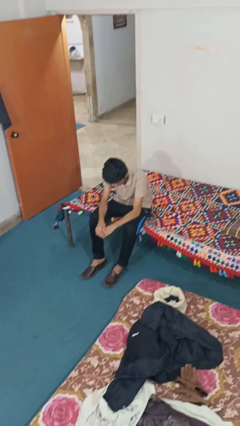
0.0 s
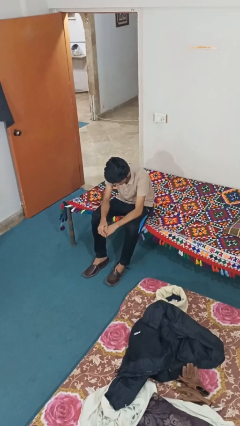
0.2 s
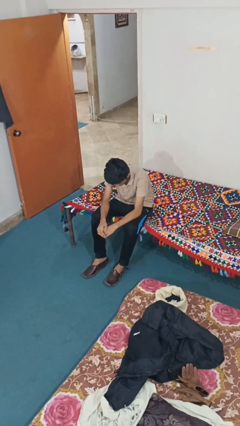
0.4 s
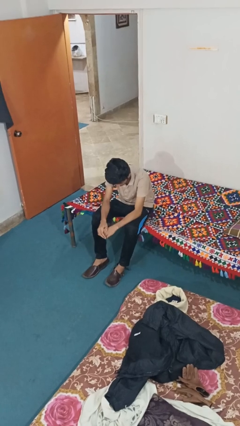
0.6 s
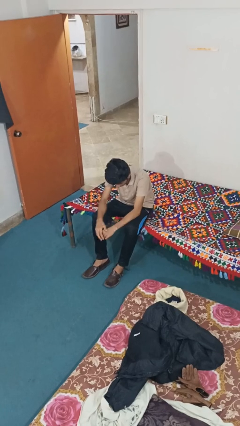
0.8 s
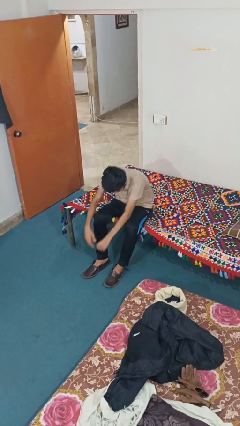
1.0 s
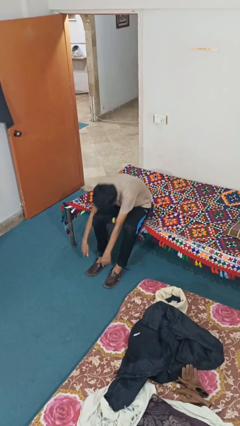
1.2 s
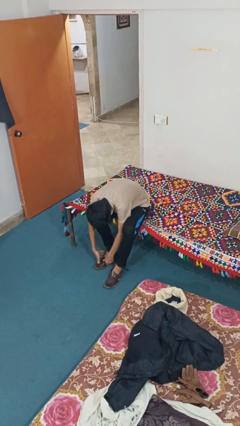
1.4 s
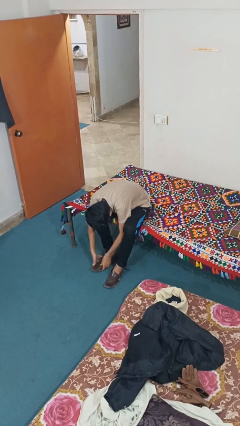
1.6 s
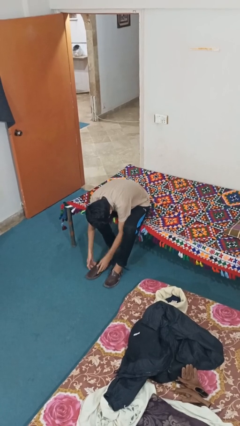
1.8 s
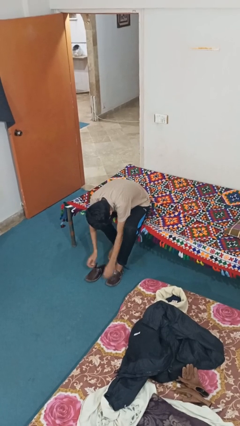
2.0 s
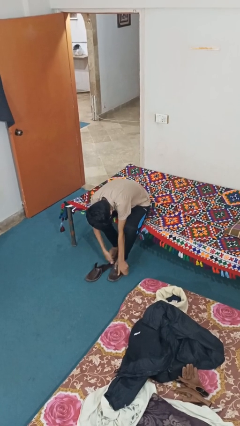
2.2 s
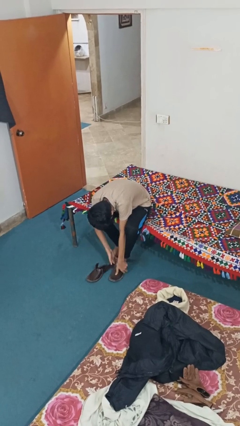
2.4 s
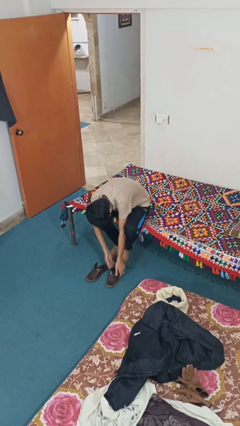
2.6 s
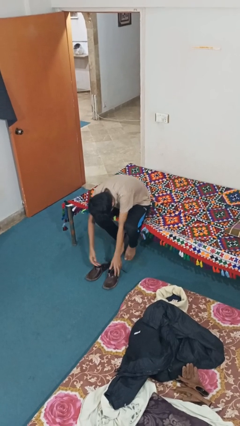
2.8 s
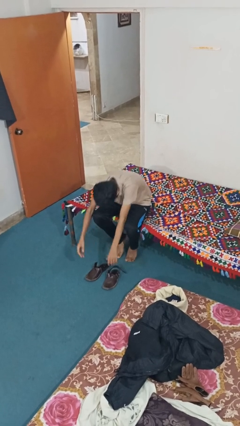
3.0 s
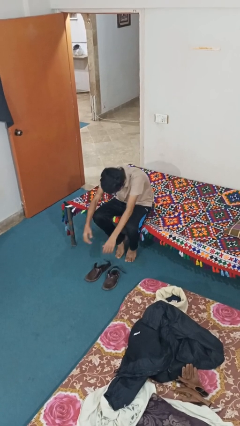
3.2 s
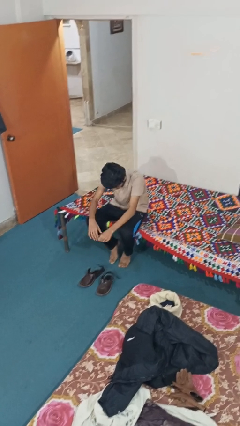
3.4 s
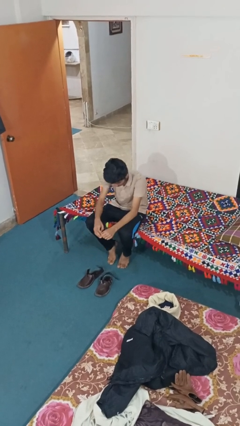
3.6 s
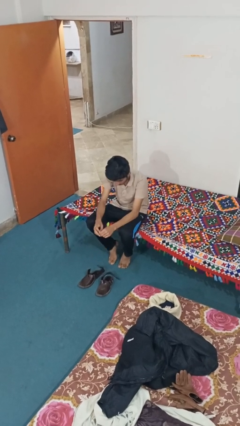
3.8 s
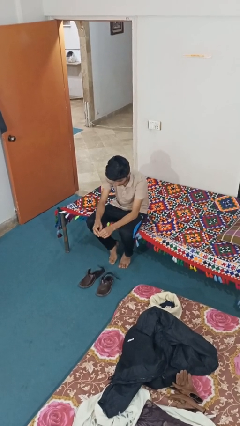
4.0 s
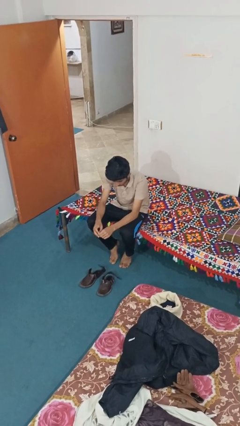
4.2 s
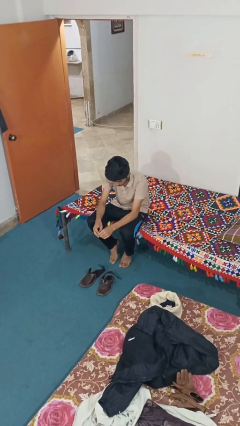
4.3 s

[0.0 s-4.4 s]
person takes off shoes

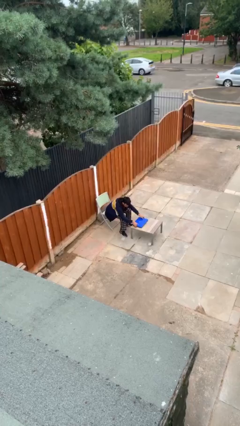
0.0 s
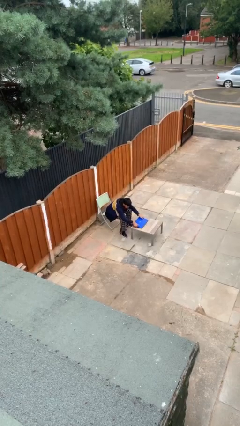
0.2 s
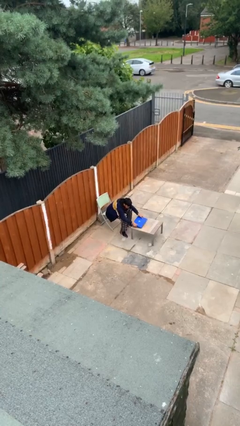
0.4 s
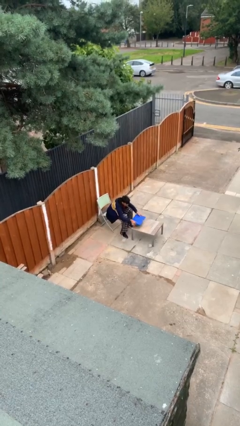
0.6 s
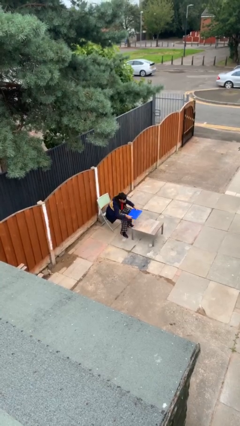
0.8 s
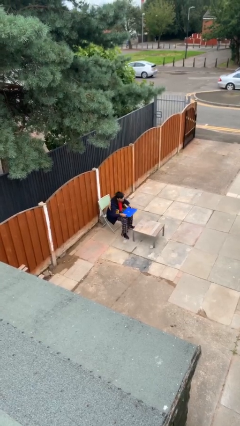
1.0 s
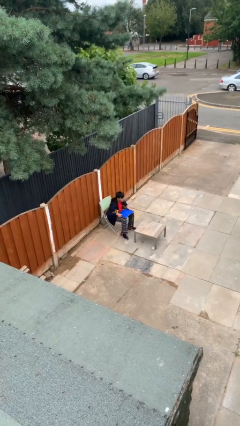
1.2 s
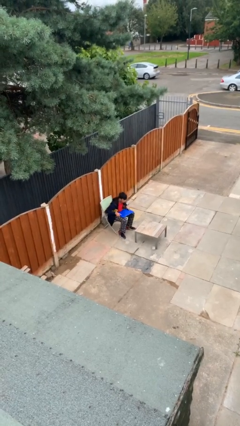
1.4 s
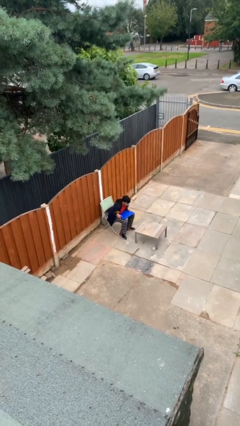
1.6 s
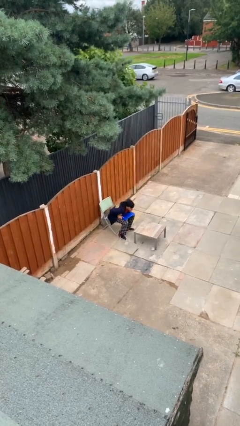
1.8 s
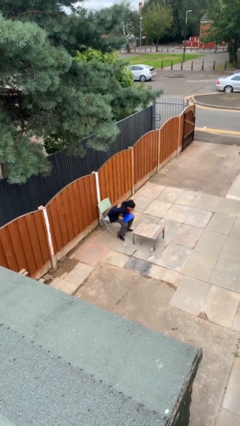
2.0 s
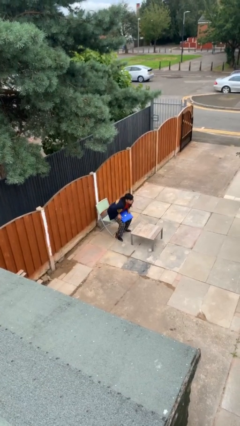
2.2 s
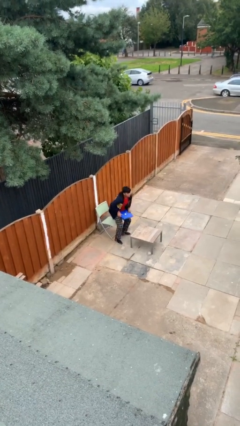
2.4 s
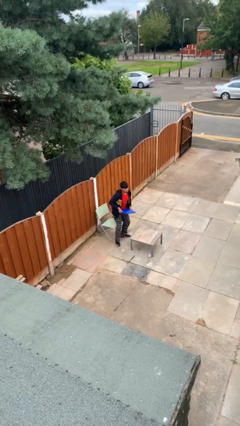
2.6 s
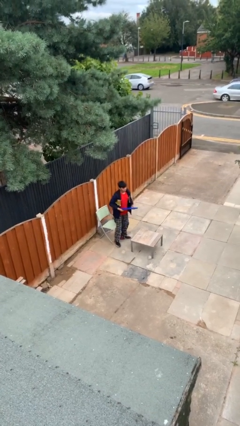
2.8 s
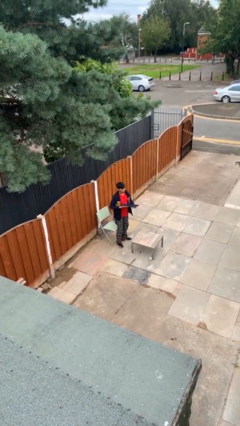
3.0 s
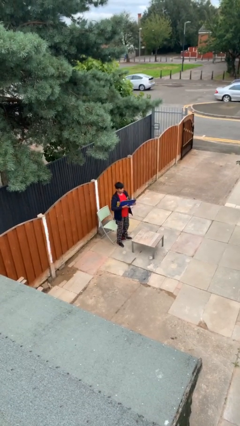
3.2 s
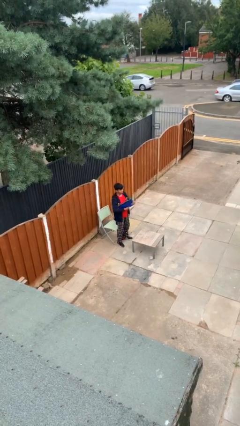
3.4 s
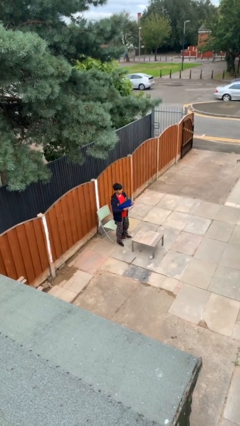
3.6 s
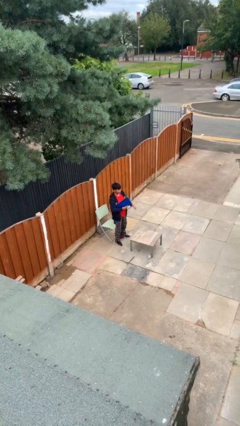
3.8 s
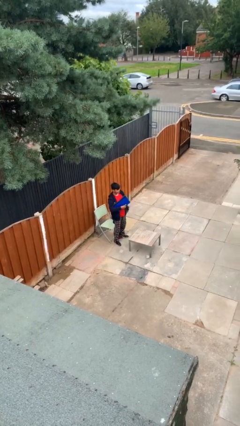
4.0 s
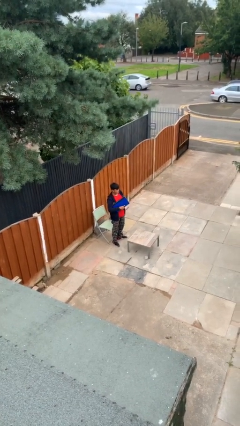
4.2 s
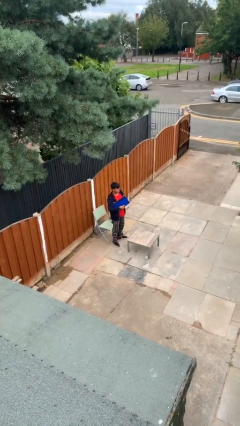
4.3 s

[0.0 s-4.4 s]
person stands up

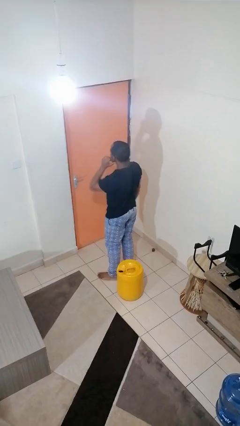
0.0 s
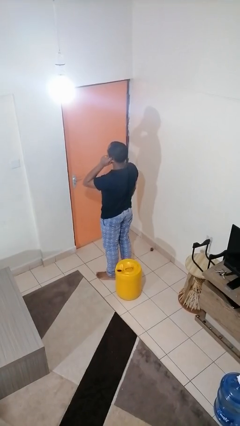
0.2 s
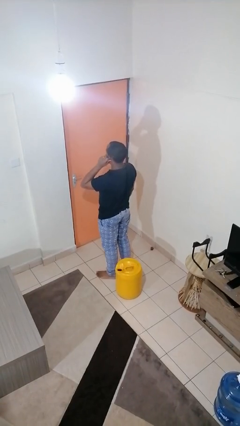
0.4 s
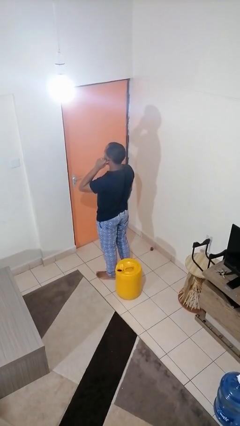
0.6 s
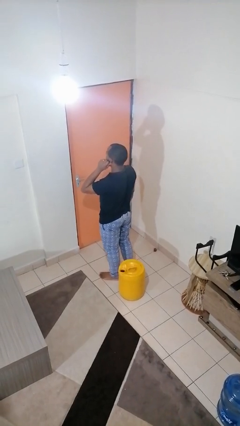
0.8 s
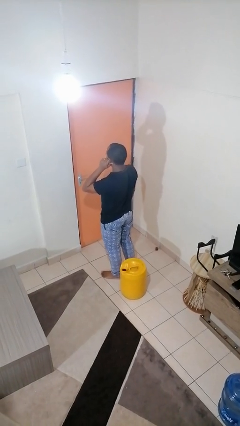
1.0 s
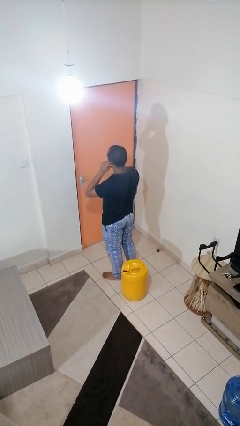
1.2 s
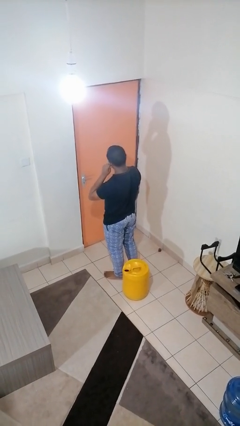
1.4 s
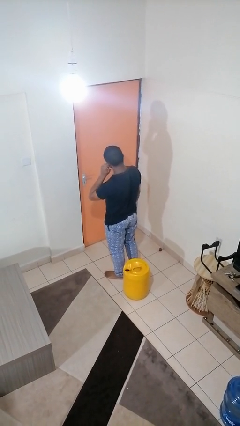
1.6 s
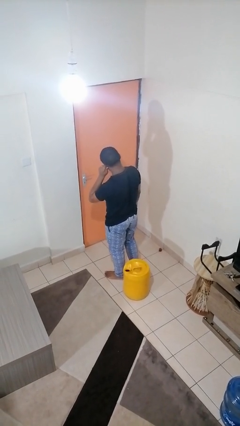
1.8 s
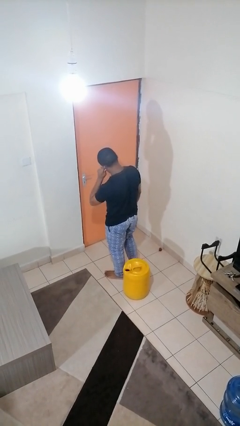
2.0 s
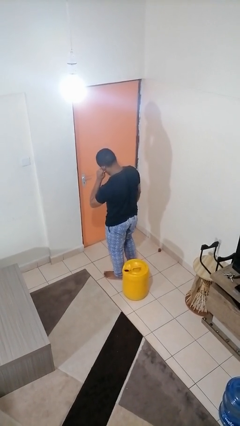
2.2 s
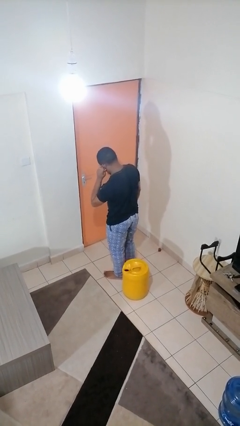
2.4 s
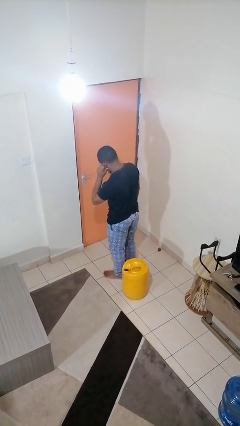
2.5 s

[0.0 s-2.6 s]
person touches earlobe

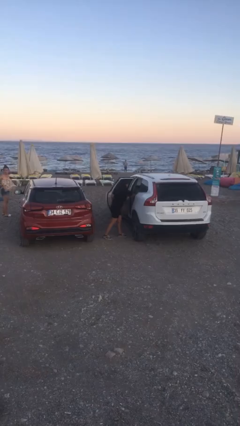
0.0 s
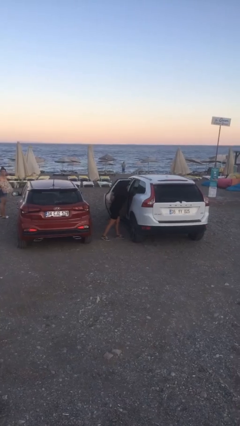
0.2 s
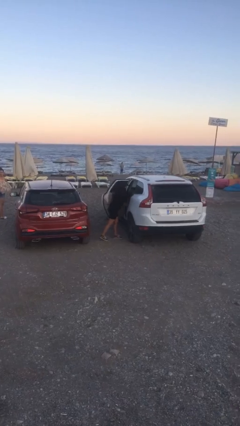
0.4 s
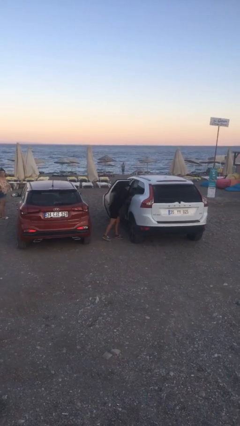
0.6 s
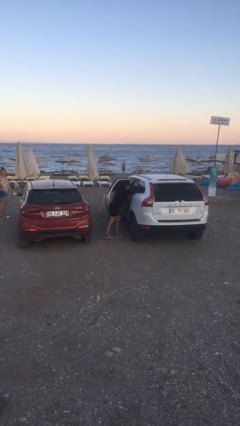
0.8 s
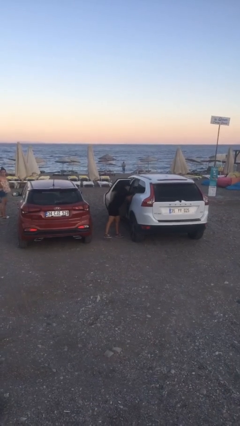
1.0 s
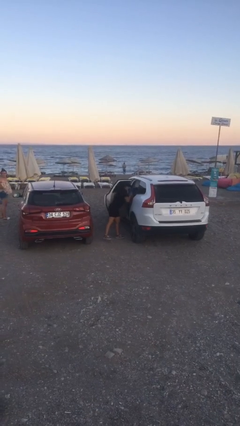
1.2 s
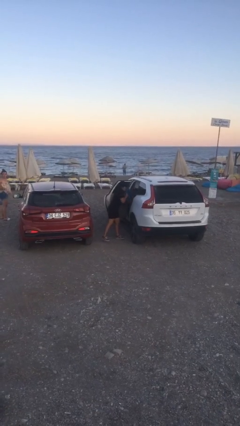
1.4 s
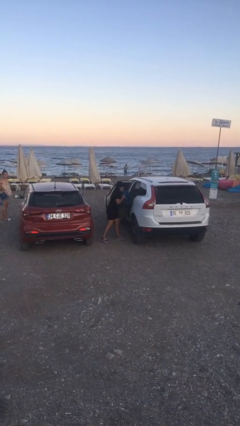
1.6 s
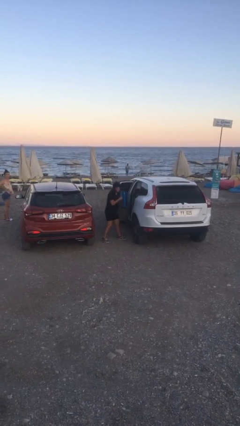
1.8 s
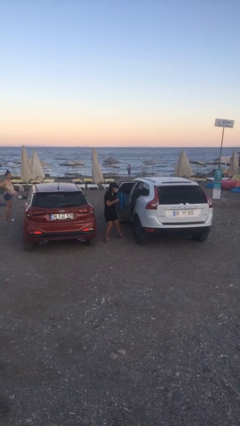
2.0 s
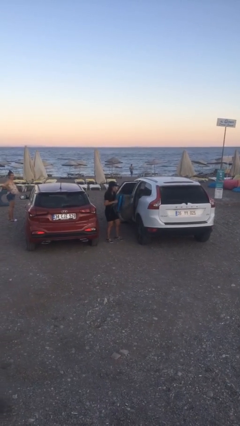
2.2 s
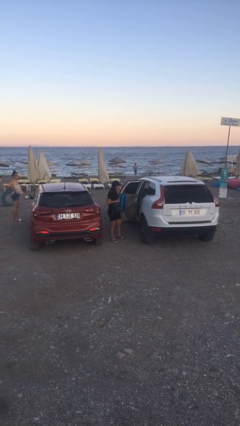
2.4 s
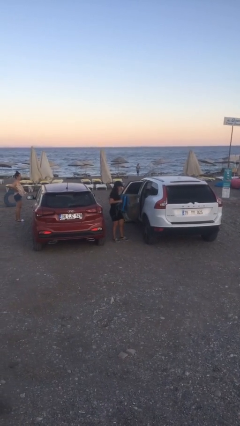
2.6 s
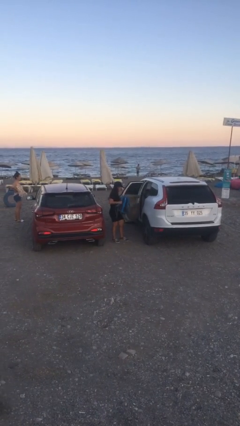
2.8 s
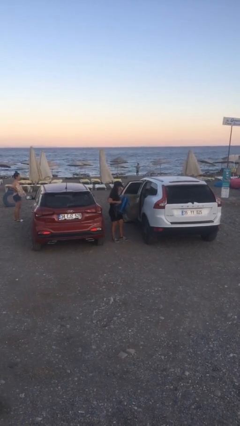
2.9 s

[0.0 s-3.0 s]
person unloads car

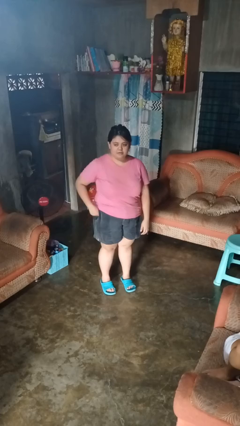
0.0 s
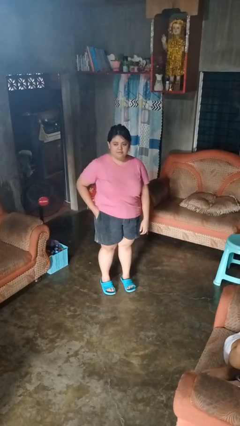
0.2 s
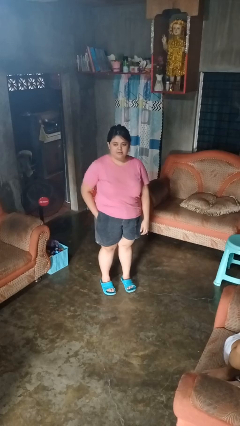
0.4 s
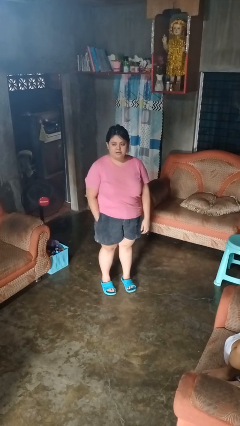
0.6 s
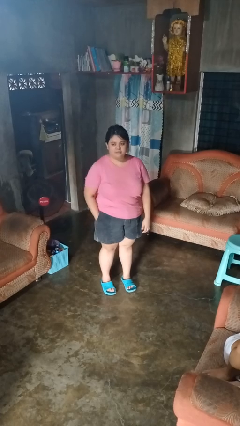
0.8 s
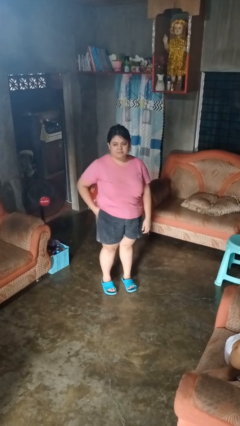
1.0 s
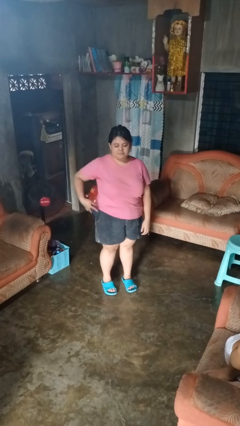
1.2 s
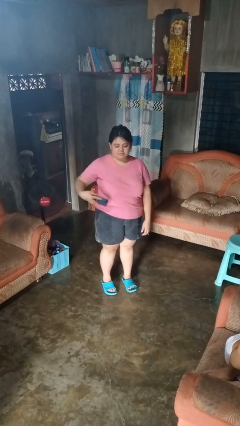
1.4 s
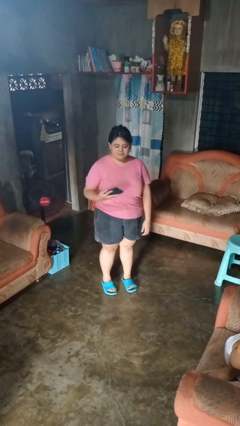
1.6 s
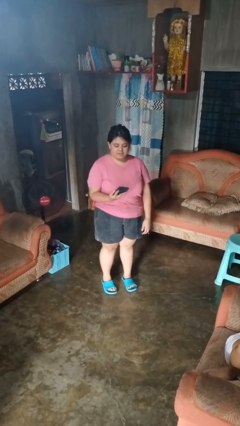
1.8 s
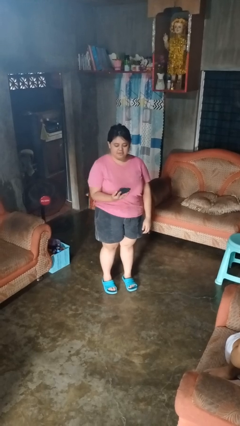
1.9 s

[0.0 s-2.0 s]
person takes phone from pocket

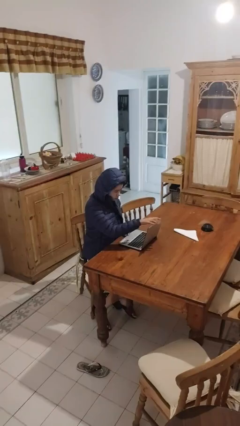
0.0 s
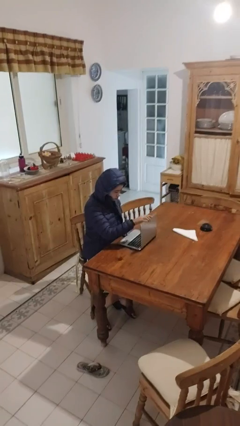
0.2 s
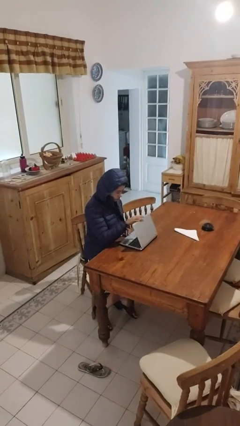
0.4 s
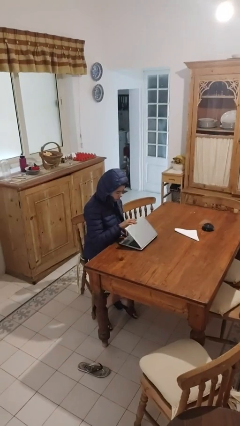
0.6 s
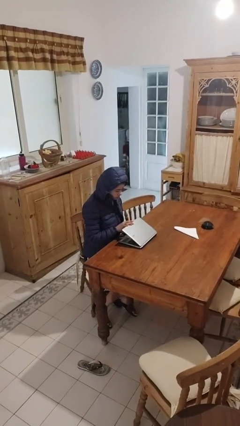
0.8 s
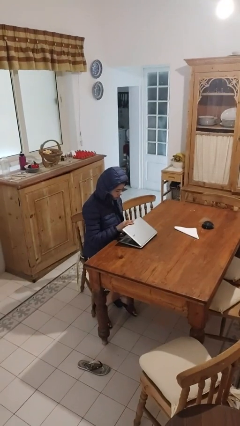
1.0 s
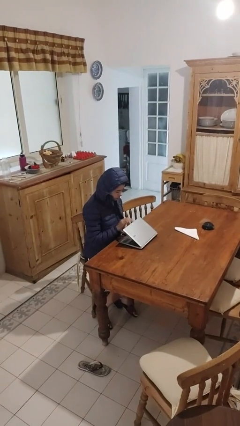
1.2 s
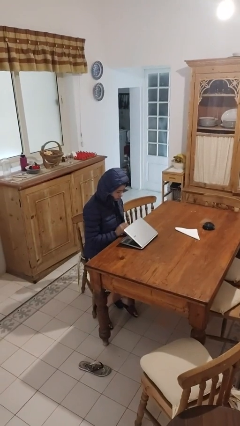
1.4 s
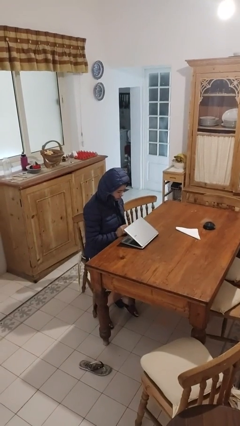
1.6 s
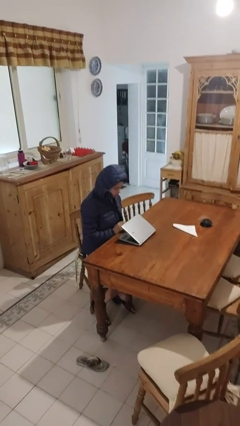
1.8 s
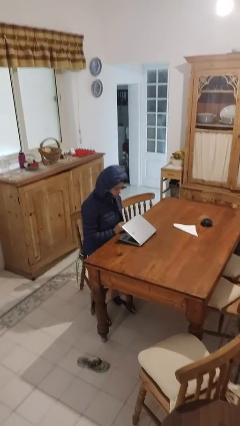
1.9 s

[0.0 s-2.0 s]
person closes laptop
